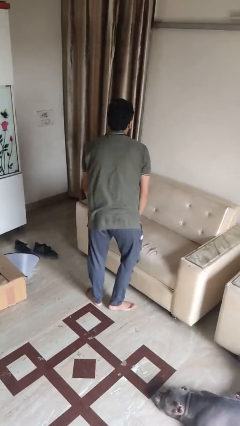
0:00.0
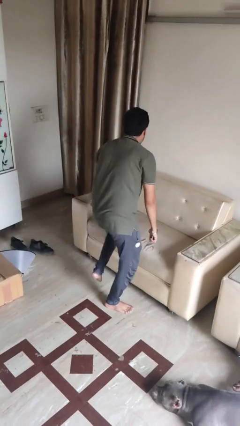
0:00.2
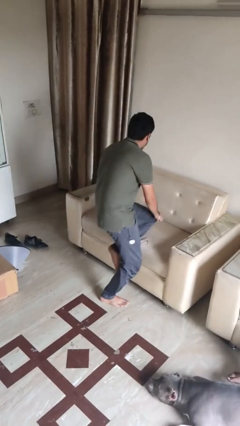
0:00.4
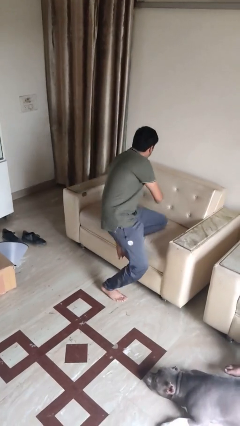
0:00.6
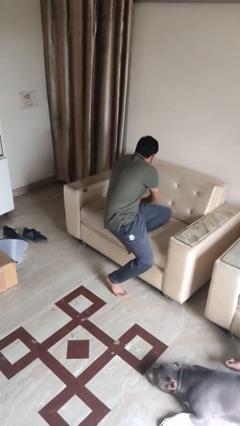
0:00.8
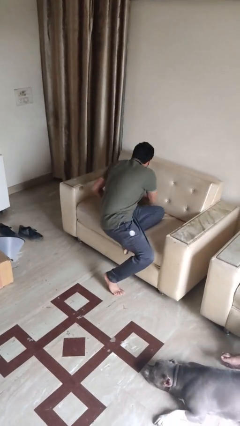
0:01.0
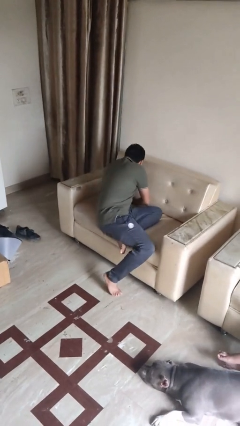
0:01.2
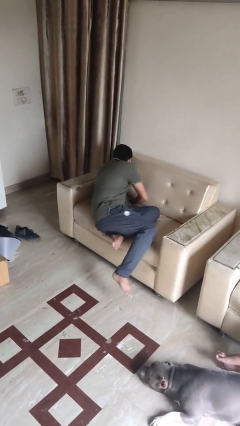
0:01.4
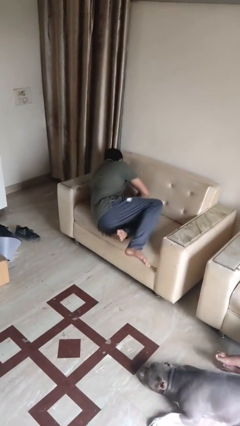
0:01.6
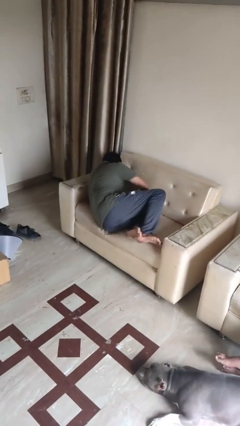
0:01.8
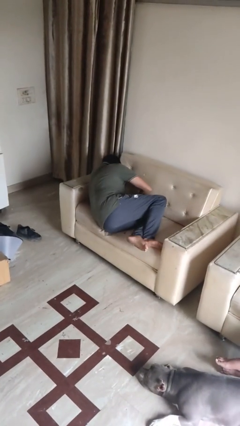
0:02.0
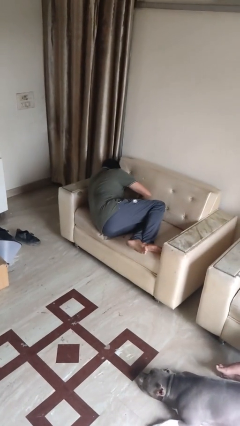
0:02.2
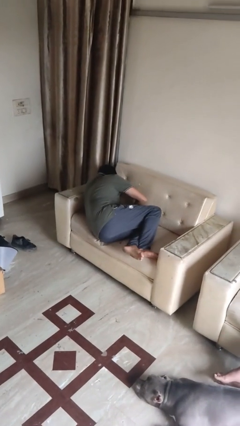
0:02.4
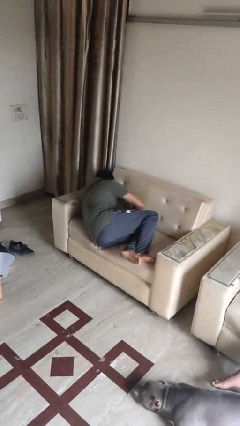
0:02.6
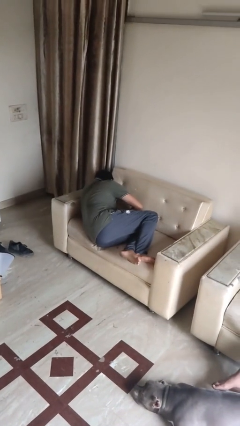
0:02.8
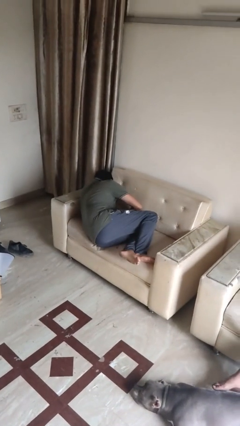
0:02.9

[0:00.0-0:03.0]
person lies down on bed

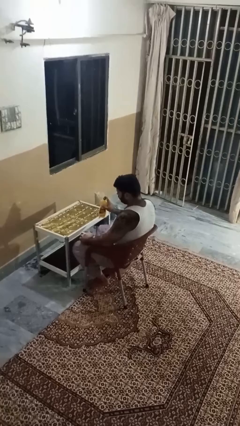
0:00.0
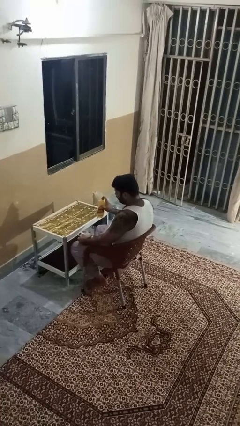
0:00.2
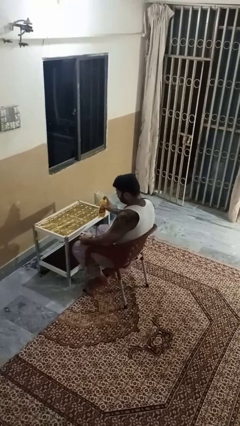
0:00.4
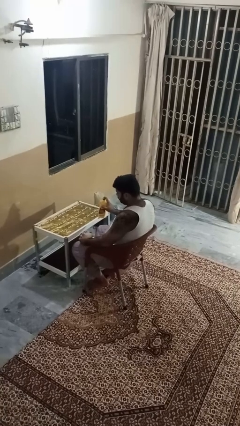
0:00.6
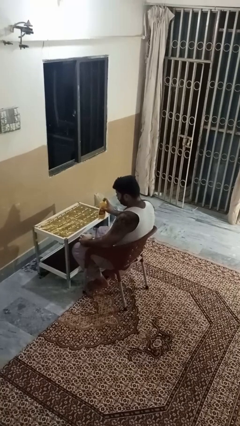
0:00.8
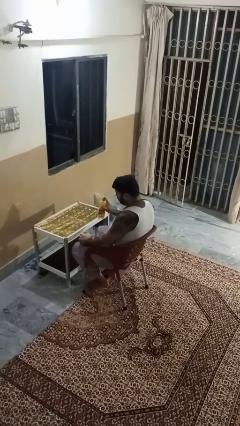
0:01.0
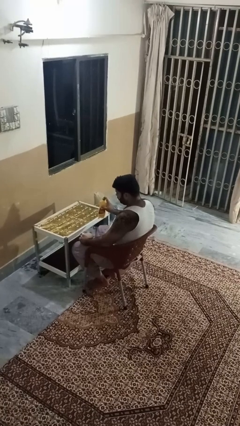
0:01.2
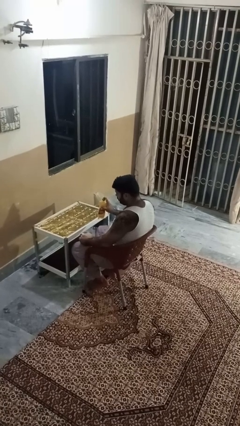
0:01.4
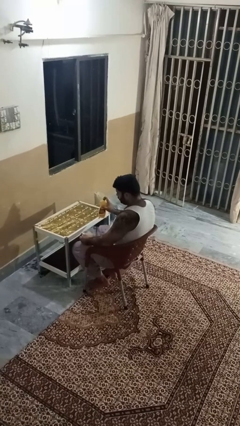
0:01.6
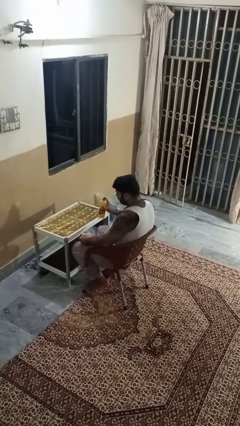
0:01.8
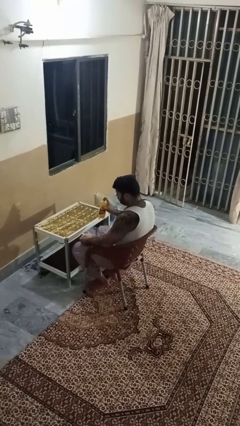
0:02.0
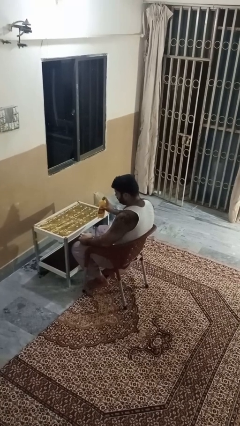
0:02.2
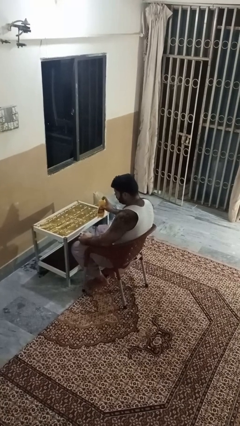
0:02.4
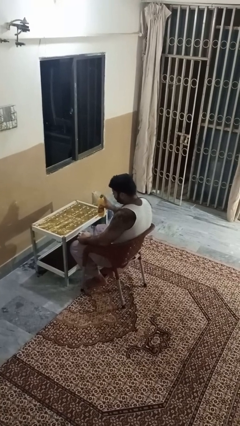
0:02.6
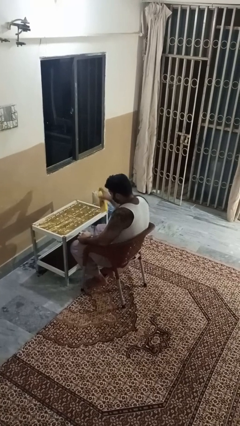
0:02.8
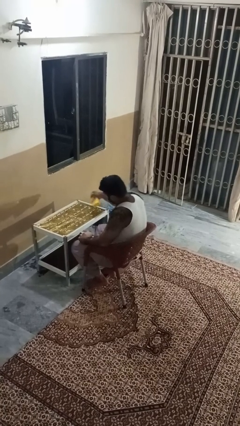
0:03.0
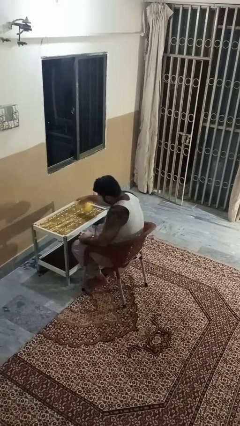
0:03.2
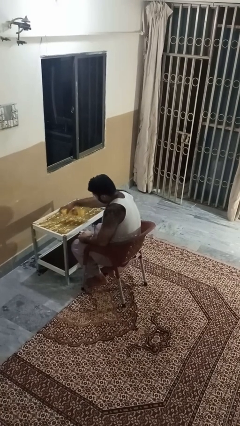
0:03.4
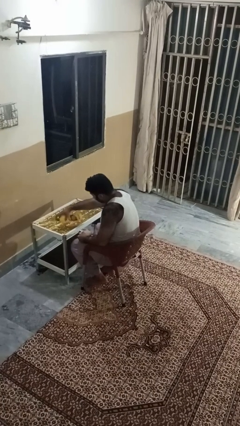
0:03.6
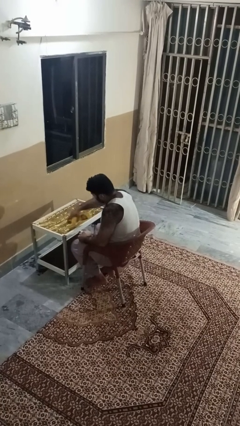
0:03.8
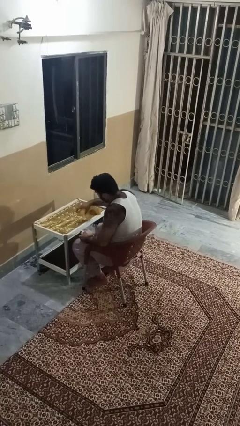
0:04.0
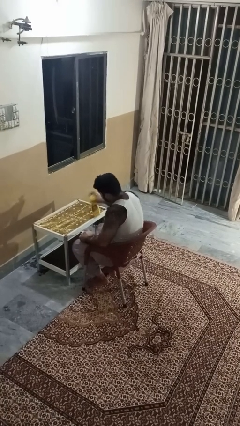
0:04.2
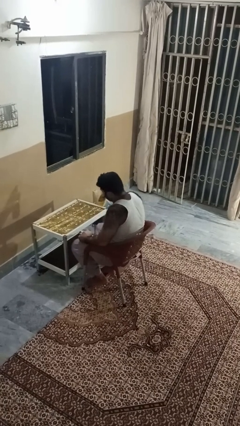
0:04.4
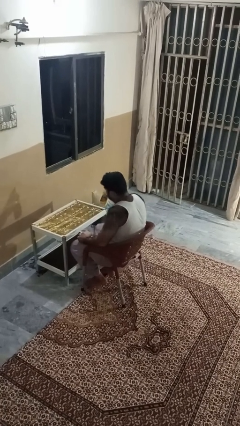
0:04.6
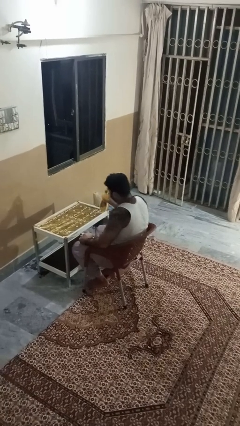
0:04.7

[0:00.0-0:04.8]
person sprays from bottle

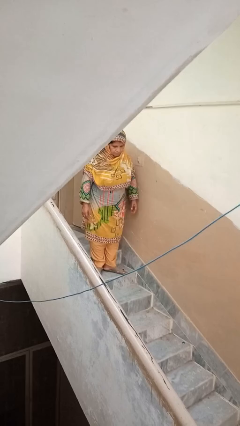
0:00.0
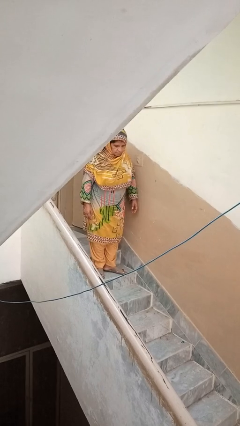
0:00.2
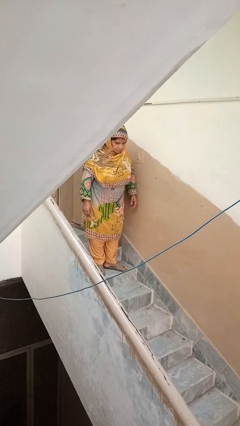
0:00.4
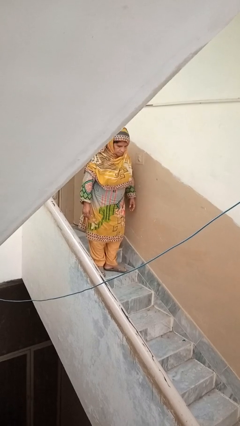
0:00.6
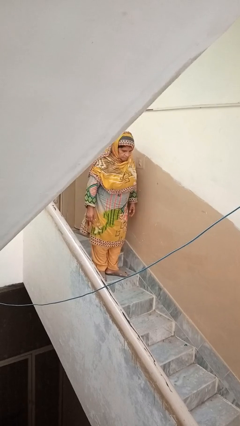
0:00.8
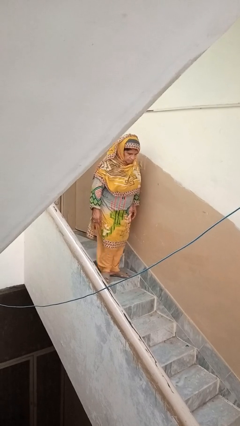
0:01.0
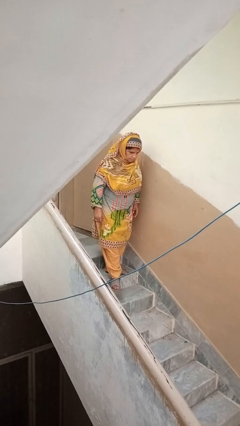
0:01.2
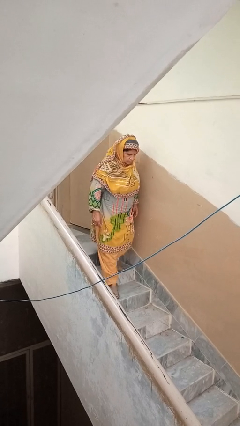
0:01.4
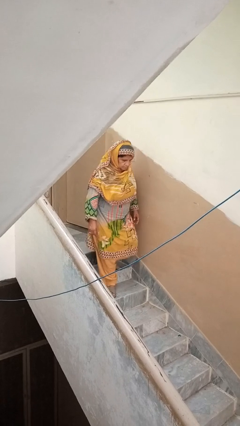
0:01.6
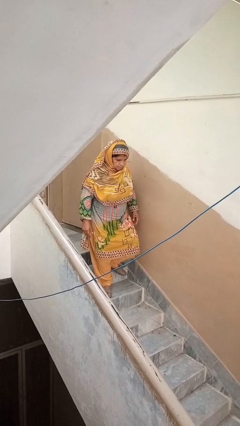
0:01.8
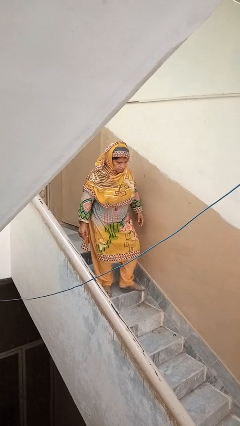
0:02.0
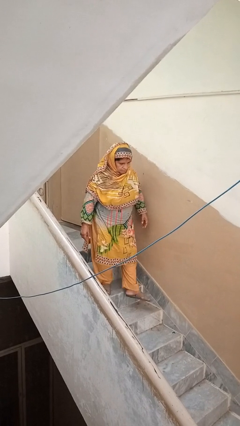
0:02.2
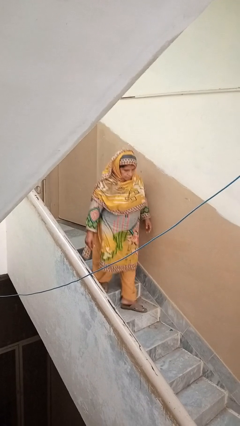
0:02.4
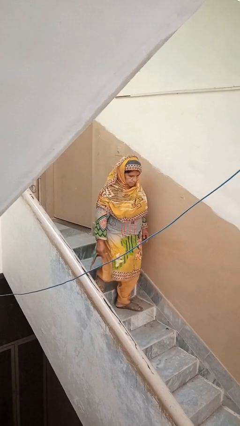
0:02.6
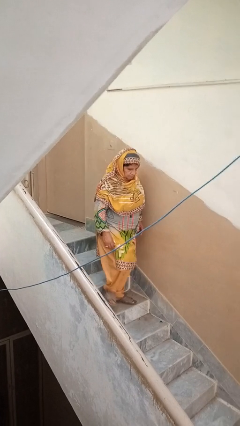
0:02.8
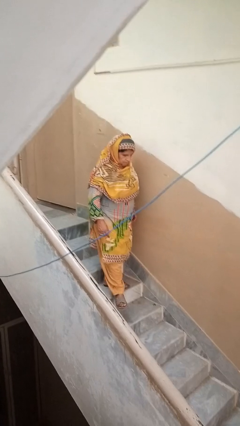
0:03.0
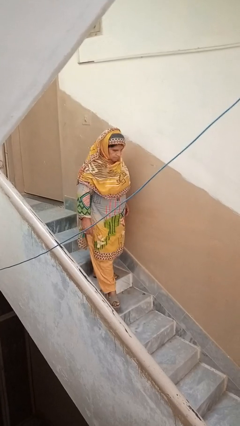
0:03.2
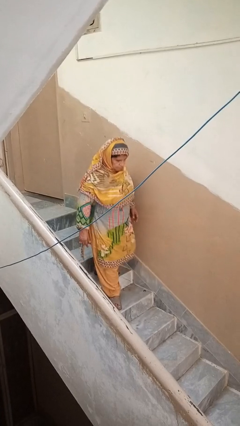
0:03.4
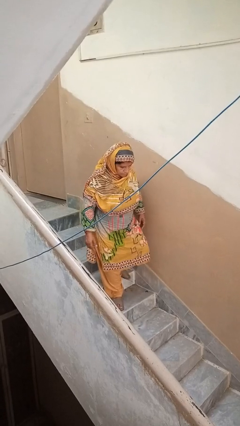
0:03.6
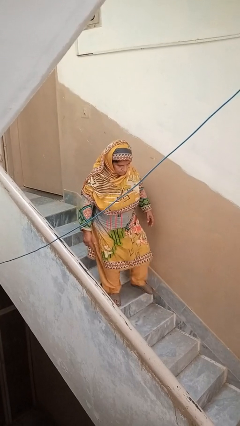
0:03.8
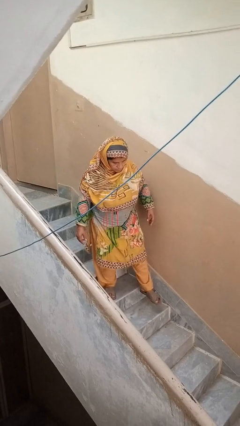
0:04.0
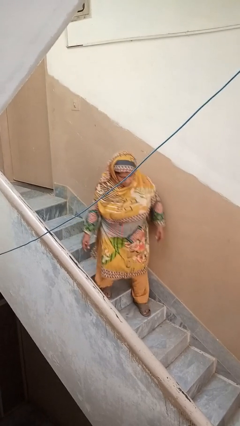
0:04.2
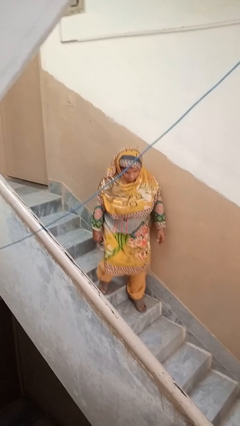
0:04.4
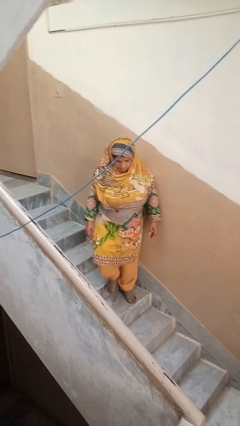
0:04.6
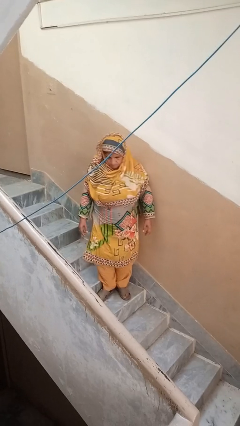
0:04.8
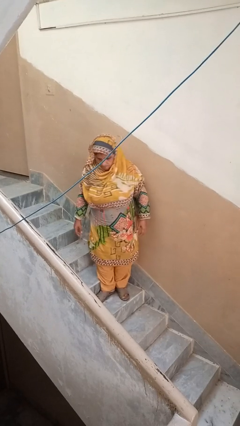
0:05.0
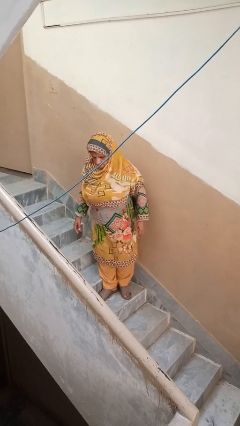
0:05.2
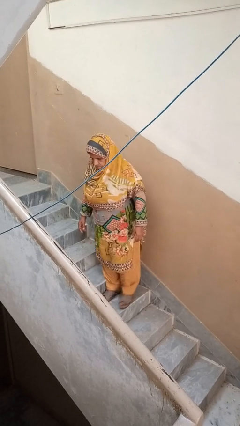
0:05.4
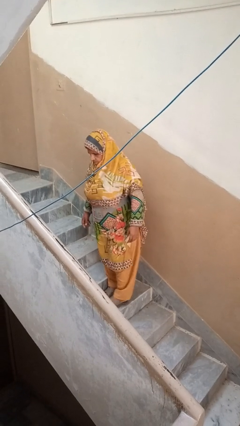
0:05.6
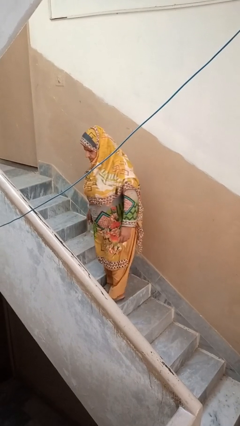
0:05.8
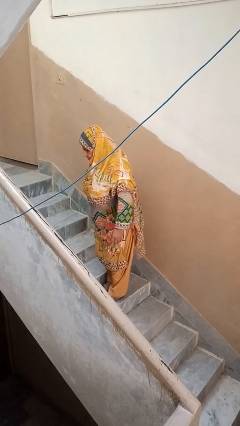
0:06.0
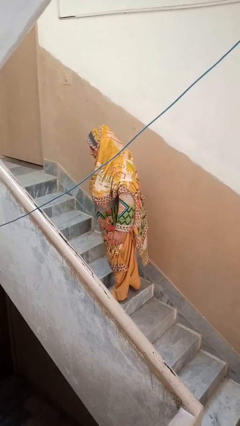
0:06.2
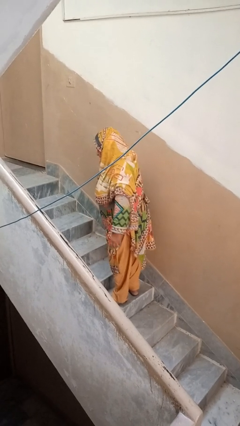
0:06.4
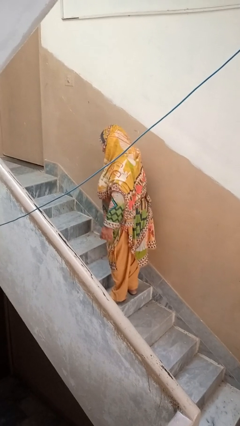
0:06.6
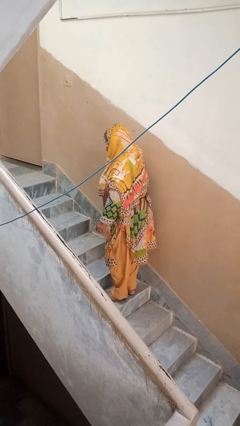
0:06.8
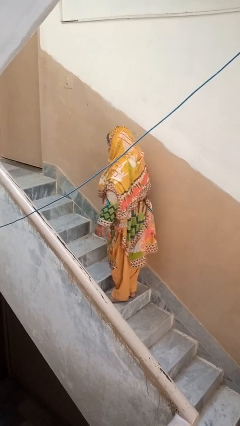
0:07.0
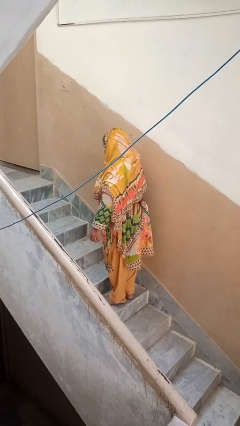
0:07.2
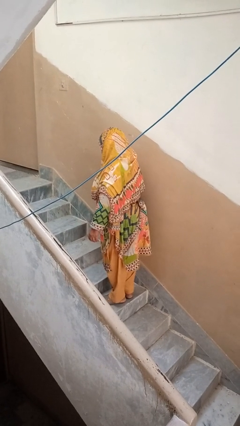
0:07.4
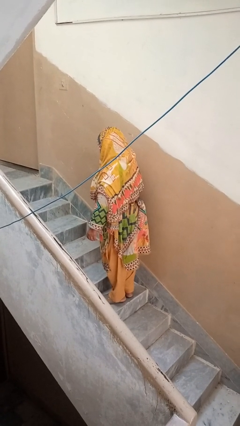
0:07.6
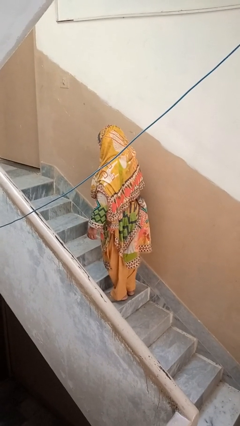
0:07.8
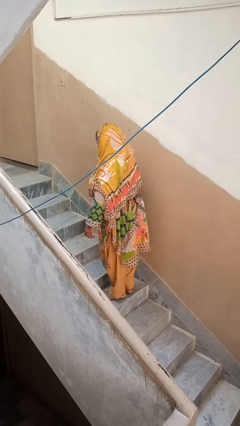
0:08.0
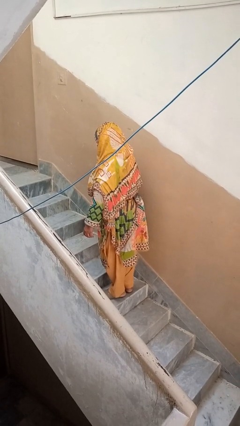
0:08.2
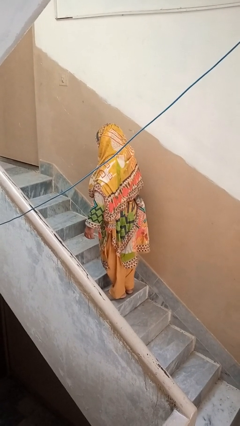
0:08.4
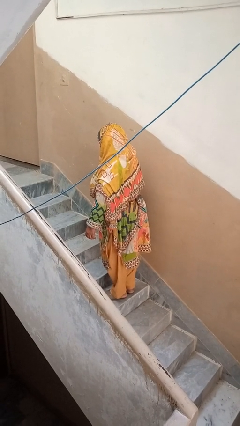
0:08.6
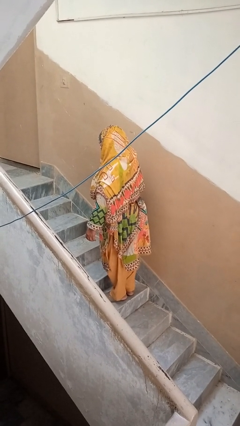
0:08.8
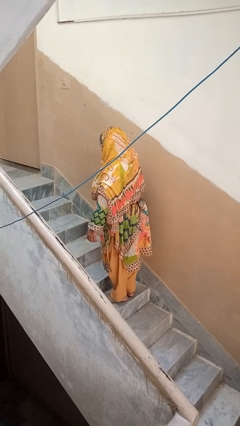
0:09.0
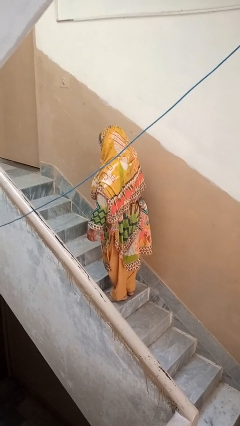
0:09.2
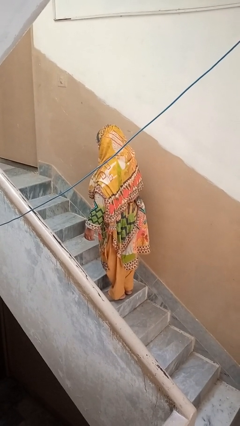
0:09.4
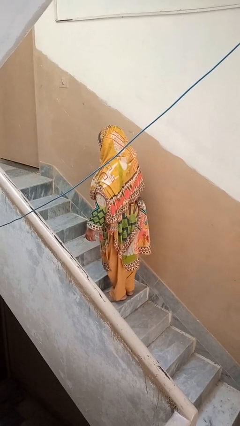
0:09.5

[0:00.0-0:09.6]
person climbs down stairs

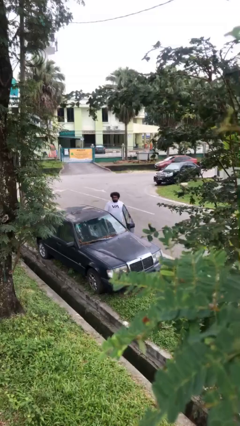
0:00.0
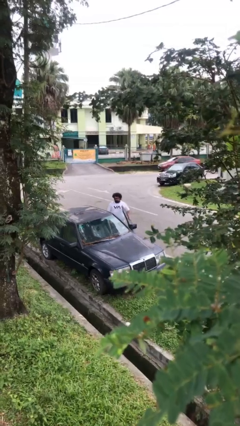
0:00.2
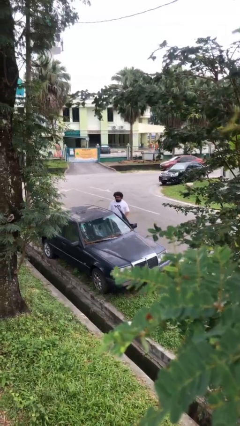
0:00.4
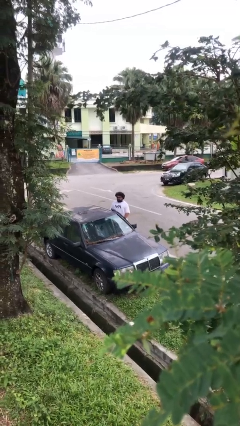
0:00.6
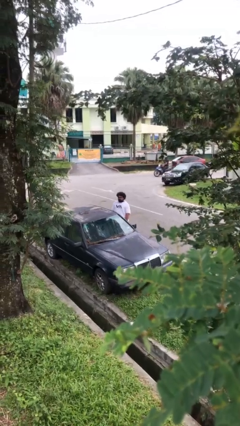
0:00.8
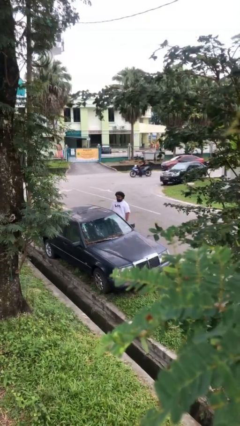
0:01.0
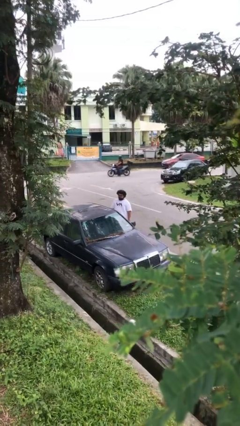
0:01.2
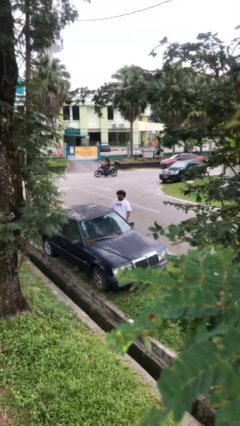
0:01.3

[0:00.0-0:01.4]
person closes car door
